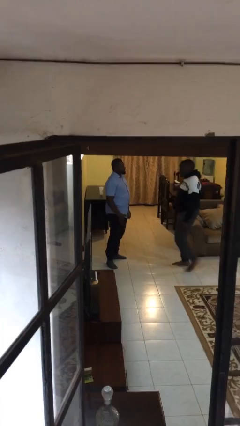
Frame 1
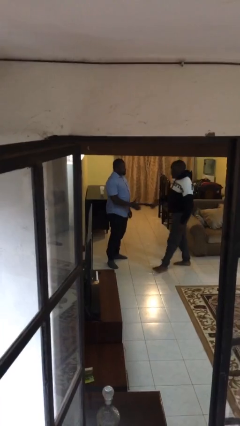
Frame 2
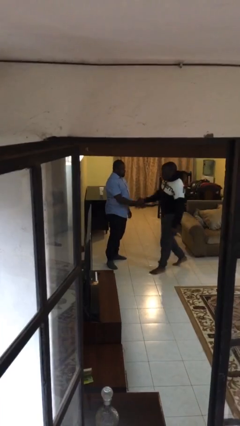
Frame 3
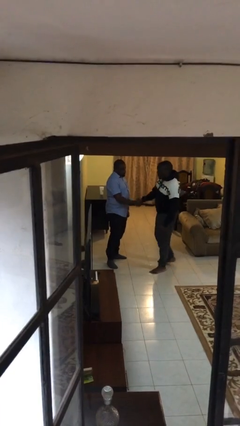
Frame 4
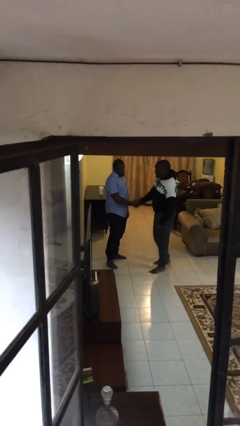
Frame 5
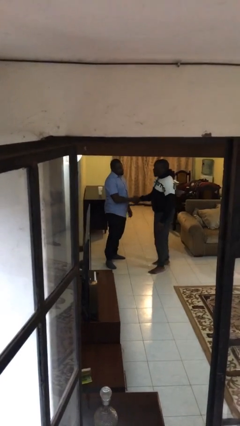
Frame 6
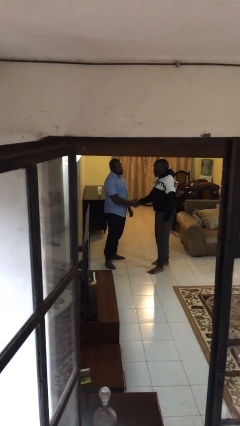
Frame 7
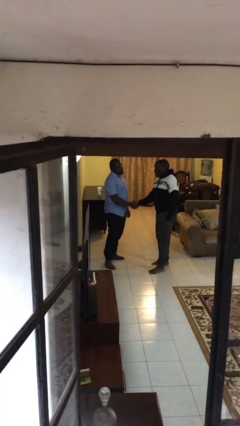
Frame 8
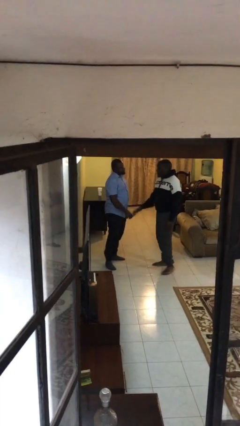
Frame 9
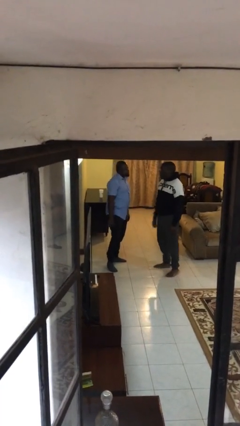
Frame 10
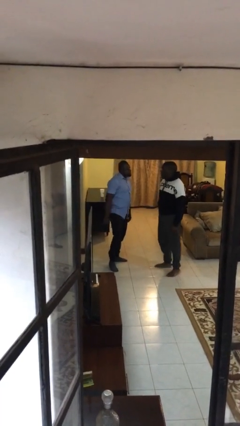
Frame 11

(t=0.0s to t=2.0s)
person shakes hand

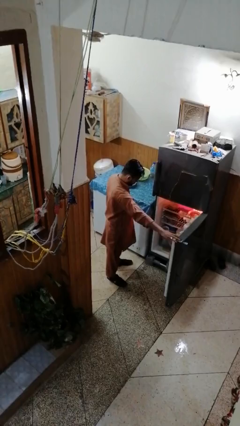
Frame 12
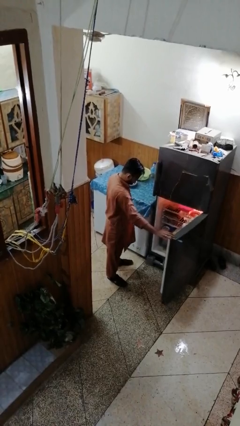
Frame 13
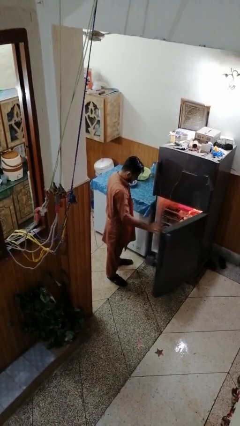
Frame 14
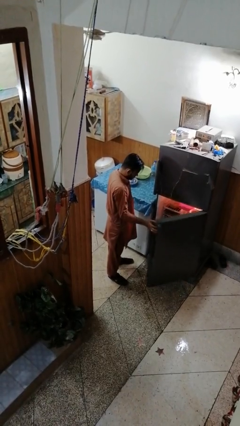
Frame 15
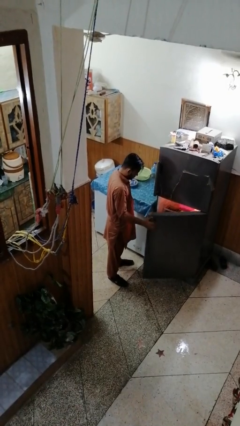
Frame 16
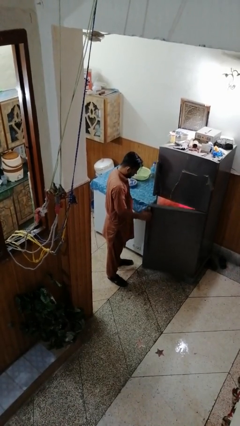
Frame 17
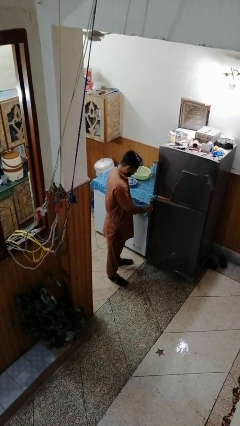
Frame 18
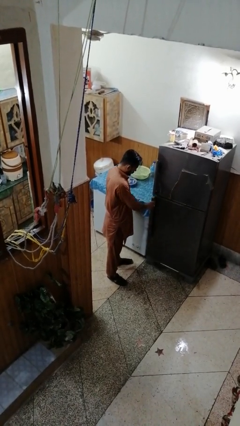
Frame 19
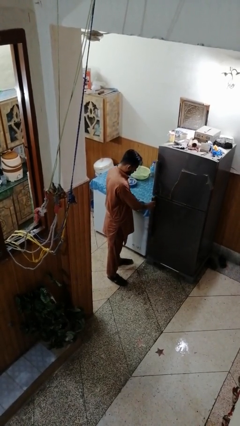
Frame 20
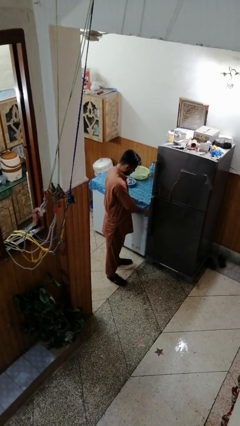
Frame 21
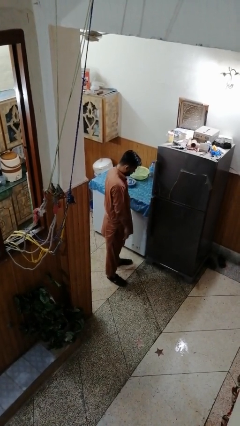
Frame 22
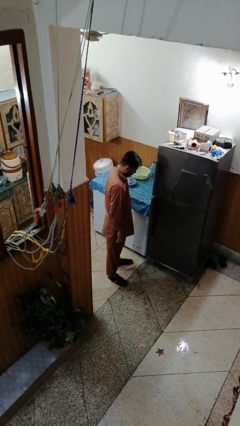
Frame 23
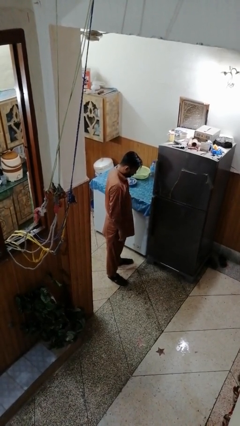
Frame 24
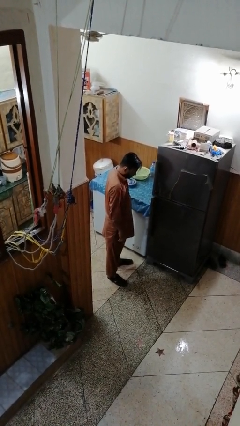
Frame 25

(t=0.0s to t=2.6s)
person closes refrigerator

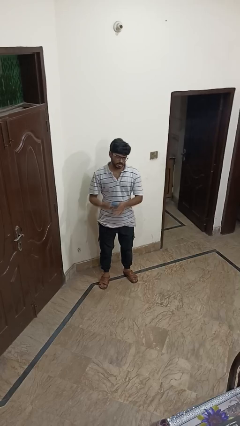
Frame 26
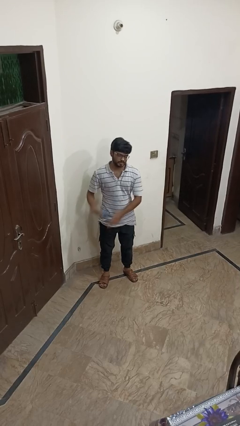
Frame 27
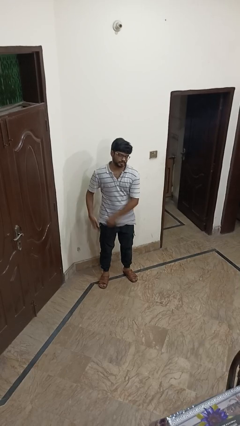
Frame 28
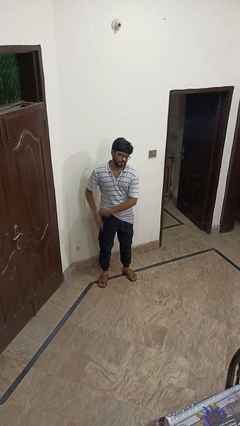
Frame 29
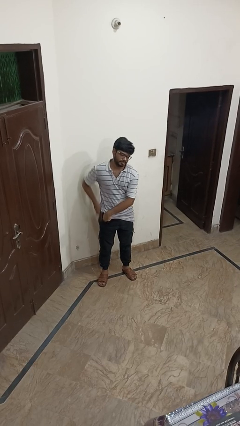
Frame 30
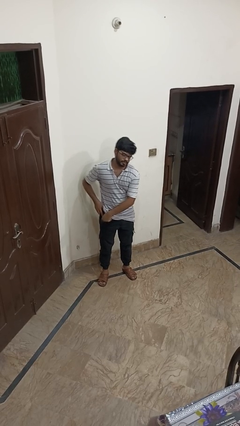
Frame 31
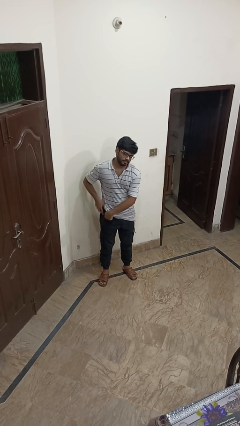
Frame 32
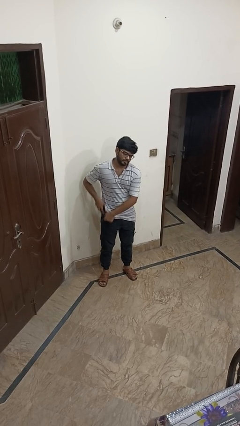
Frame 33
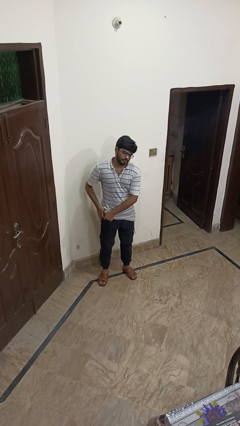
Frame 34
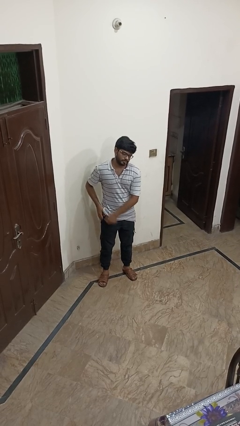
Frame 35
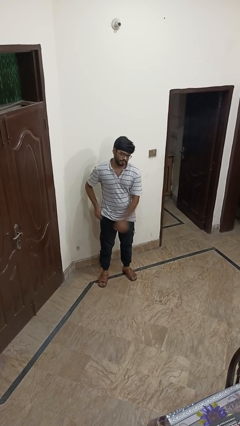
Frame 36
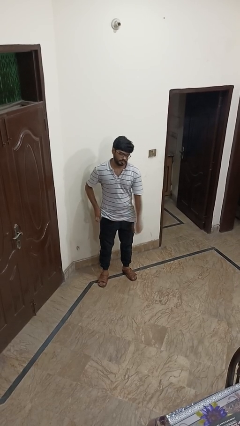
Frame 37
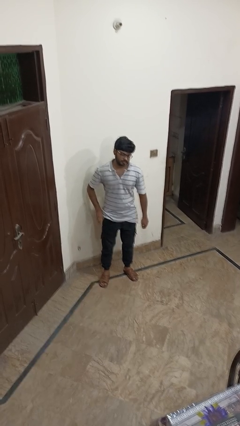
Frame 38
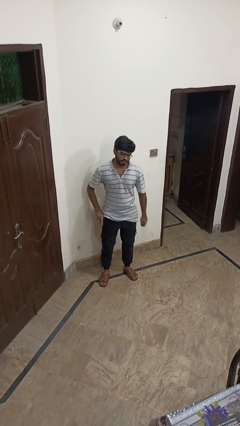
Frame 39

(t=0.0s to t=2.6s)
person puts phone into pocket

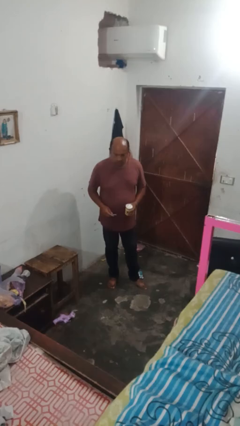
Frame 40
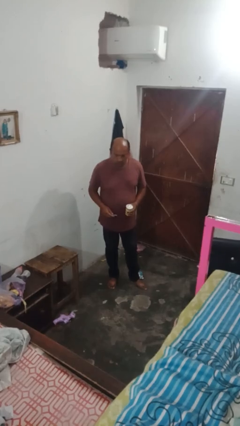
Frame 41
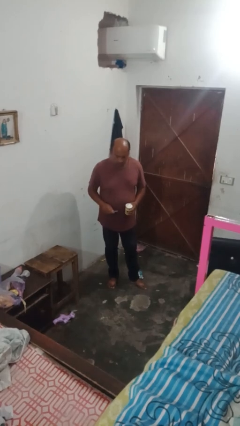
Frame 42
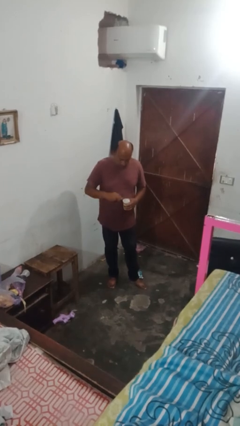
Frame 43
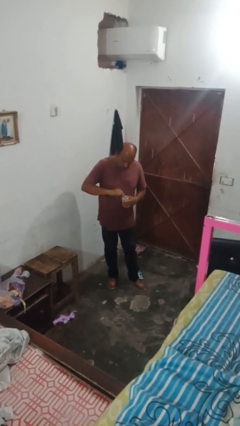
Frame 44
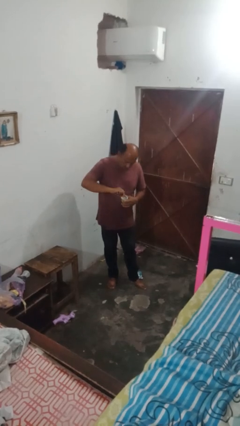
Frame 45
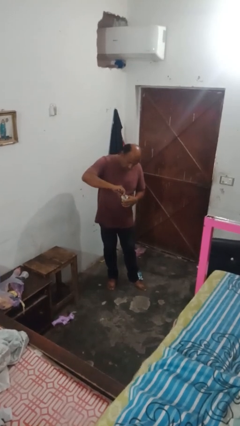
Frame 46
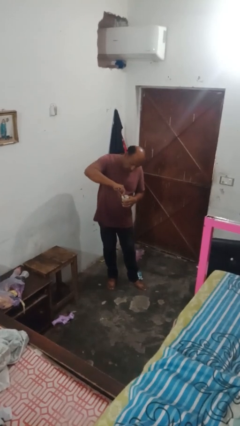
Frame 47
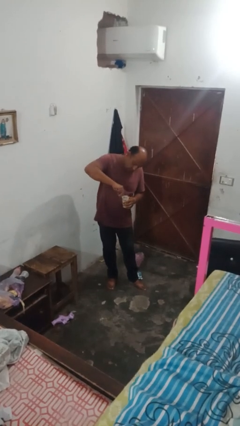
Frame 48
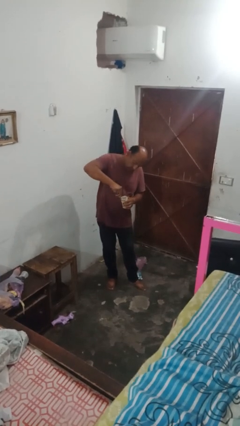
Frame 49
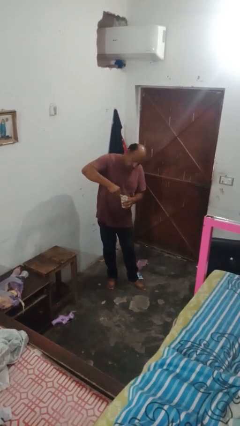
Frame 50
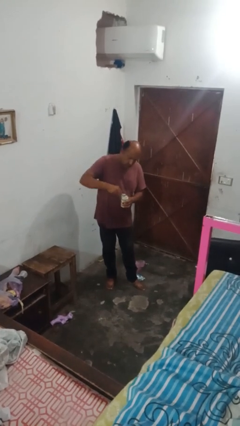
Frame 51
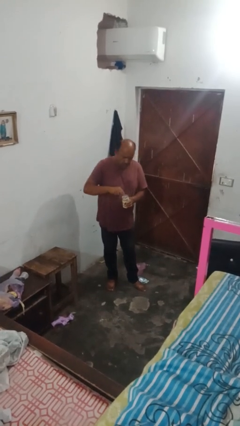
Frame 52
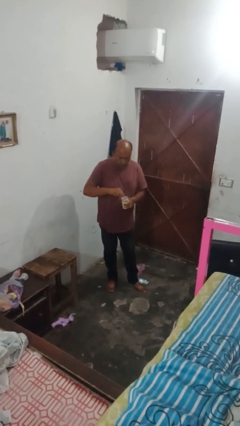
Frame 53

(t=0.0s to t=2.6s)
person opens can with can opener

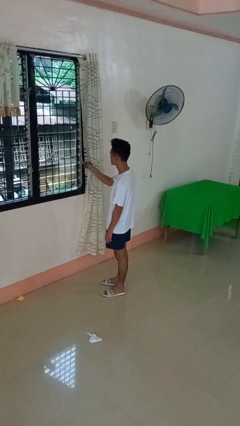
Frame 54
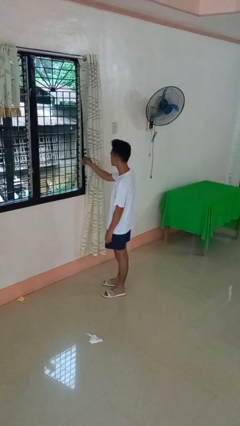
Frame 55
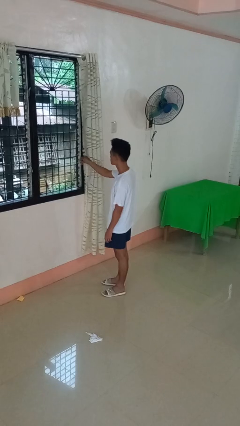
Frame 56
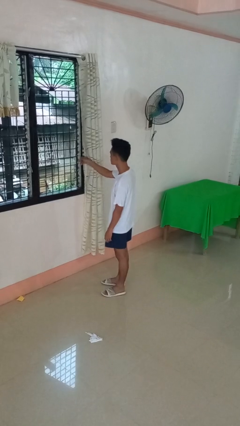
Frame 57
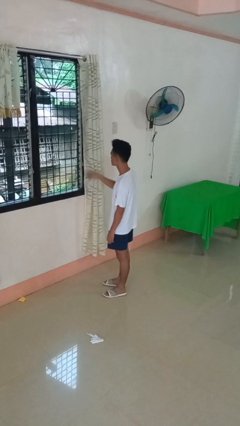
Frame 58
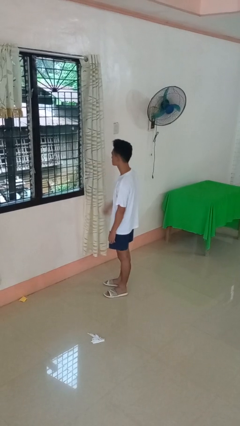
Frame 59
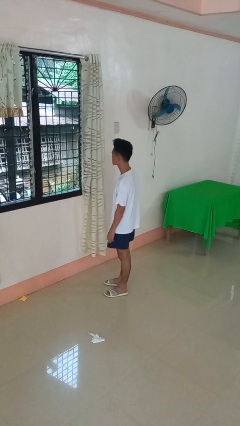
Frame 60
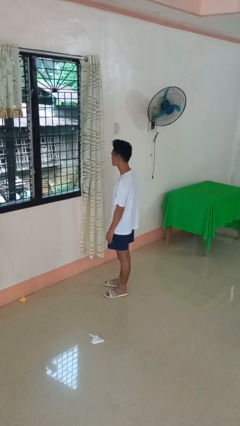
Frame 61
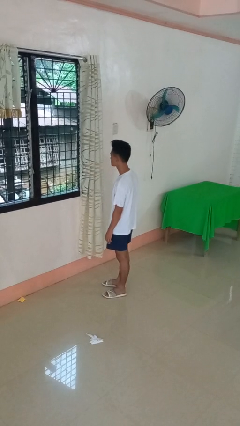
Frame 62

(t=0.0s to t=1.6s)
person closes home window

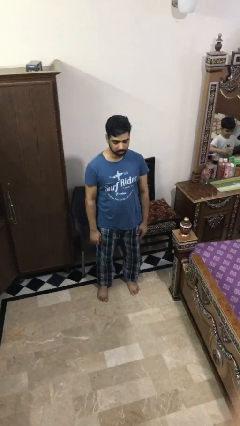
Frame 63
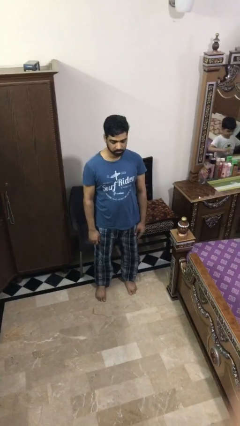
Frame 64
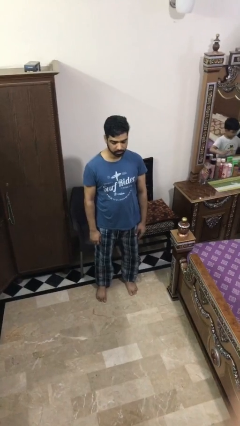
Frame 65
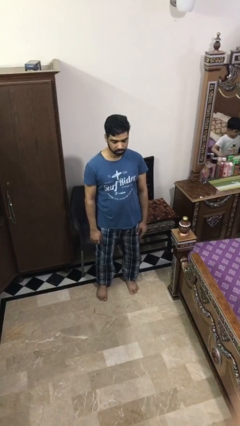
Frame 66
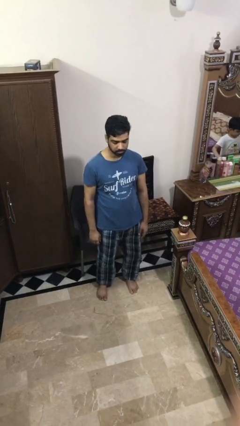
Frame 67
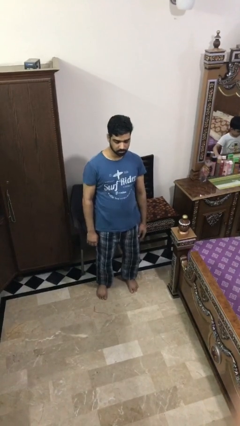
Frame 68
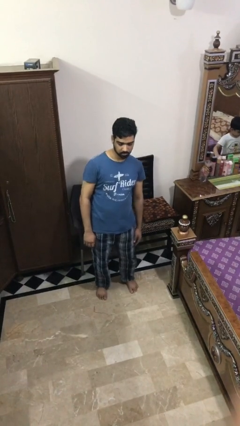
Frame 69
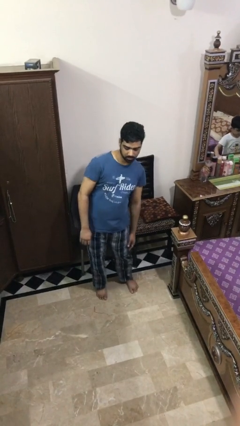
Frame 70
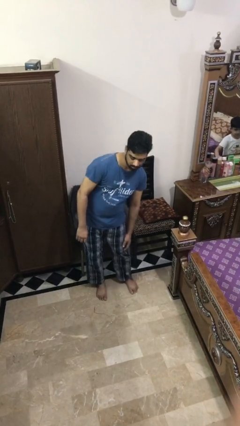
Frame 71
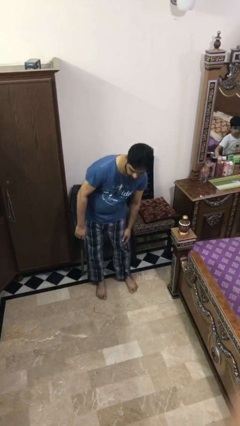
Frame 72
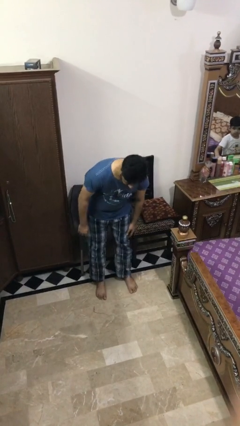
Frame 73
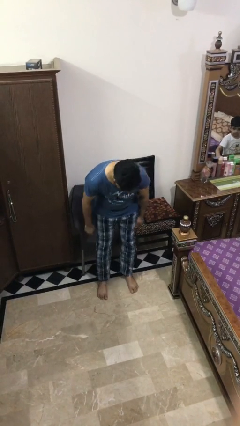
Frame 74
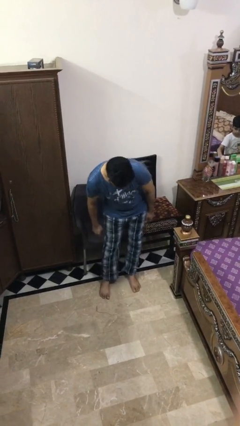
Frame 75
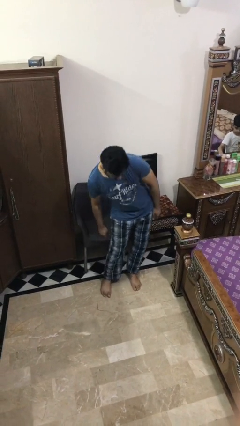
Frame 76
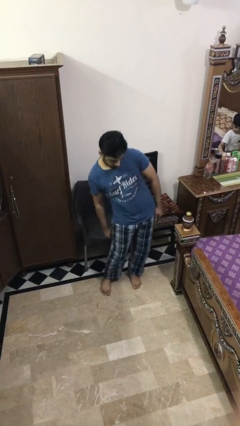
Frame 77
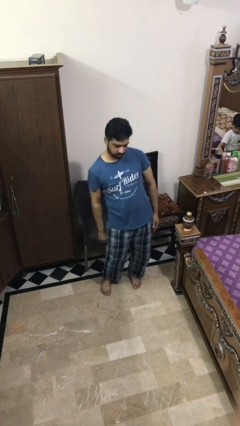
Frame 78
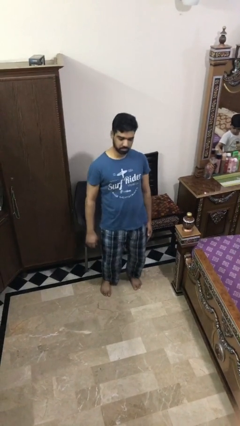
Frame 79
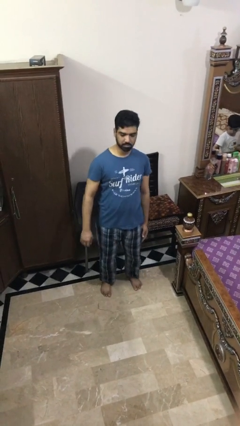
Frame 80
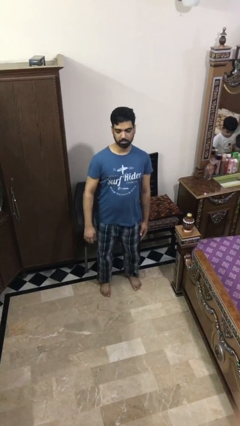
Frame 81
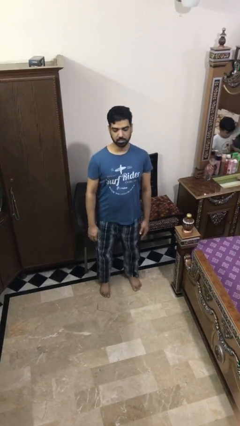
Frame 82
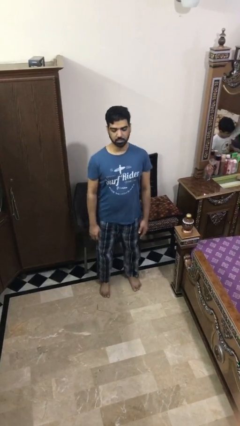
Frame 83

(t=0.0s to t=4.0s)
person wiggles hips

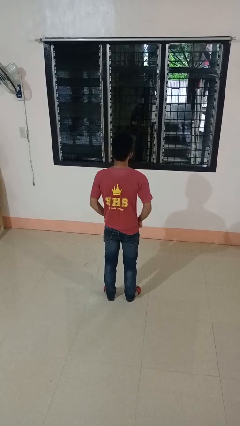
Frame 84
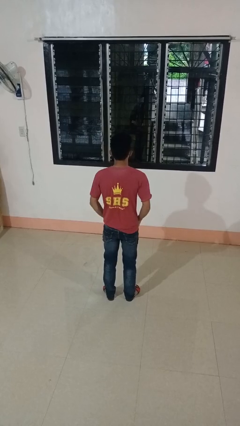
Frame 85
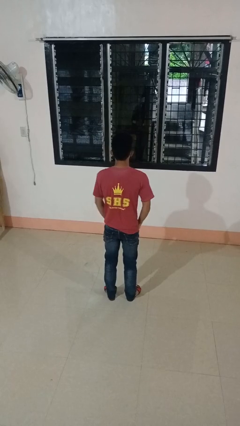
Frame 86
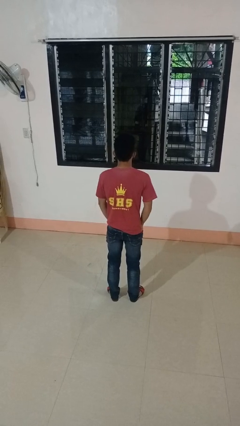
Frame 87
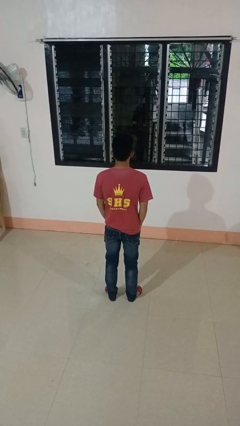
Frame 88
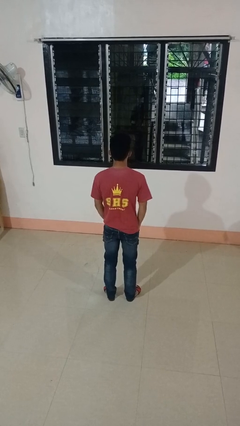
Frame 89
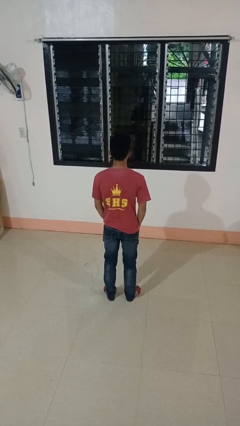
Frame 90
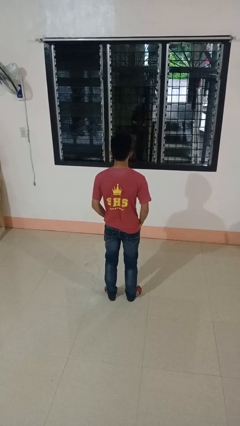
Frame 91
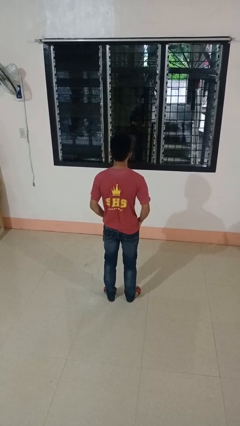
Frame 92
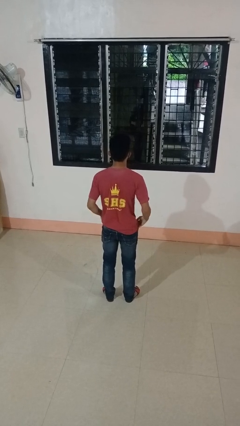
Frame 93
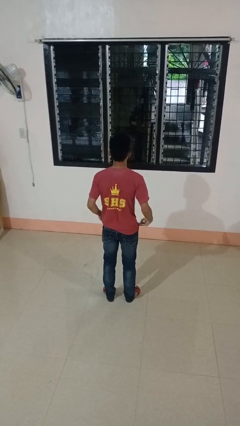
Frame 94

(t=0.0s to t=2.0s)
person puts hands in back pockets
